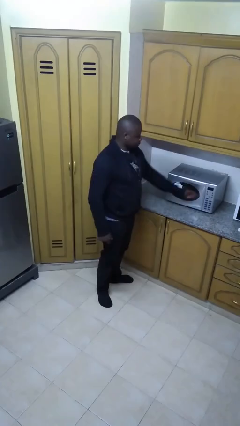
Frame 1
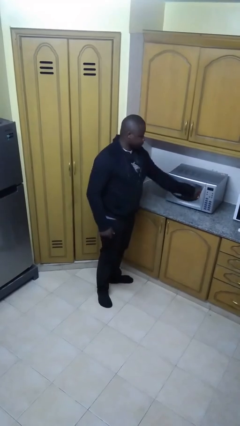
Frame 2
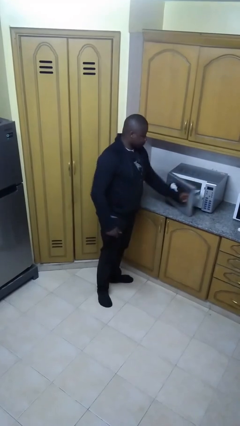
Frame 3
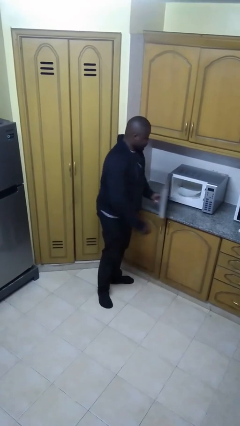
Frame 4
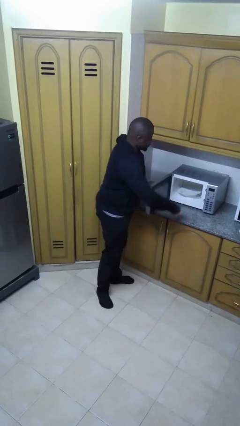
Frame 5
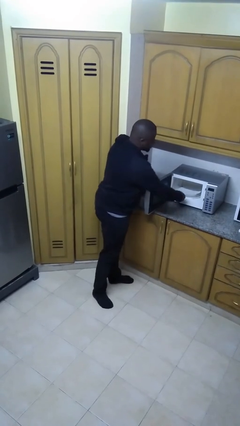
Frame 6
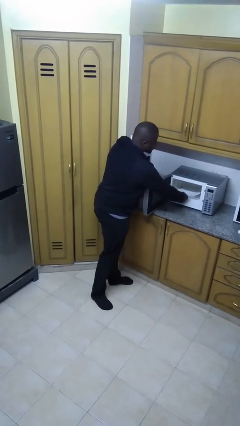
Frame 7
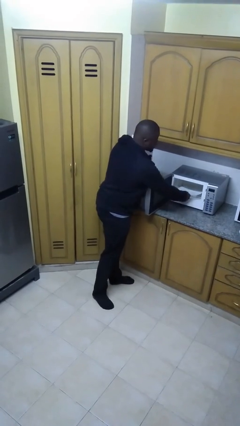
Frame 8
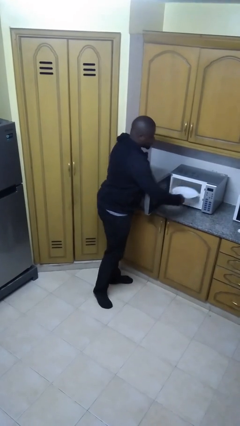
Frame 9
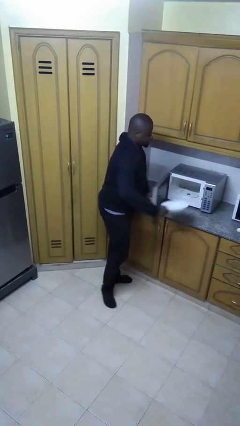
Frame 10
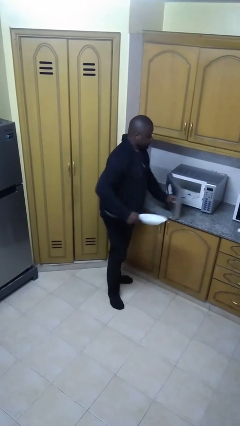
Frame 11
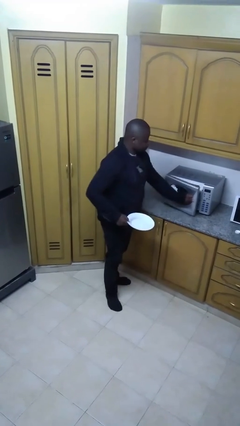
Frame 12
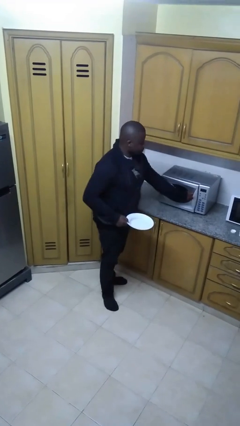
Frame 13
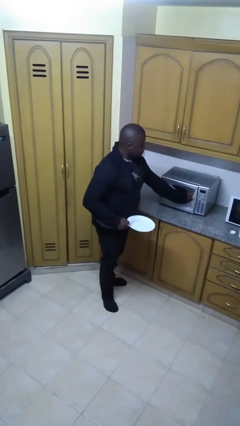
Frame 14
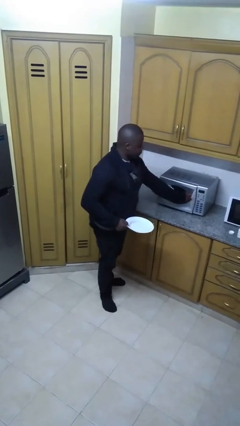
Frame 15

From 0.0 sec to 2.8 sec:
person takes object from microwave

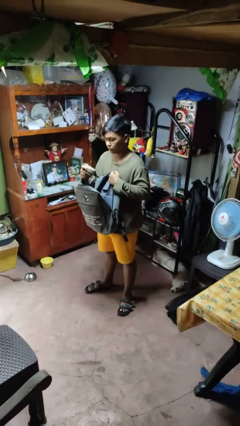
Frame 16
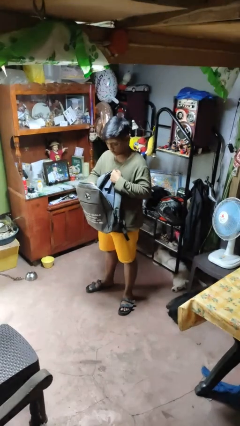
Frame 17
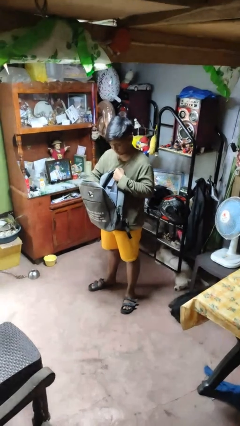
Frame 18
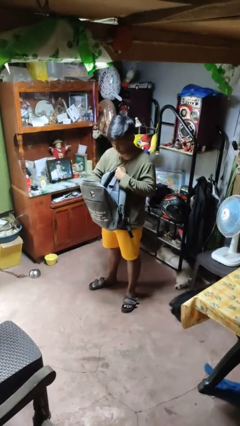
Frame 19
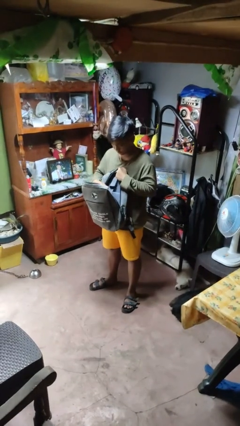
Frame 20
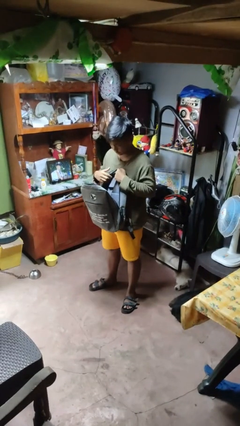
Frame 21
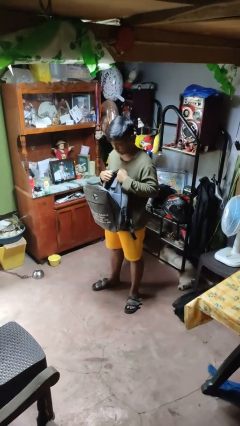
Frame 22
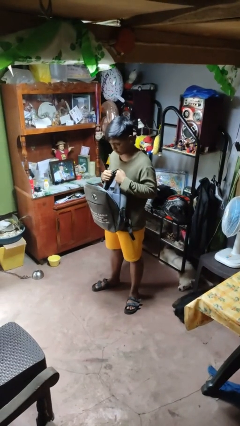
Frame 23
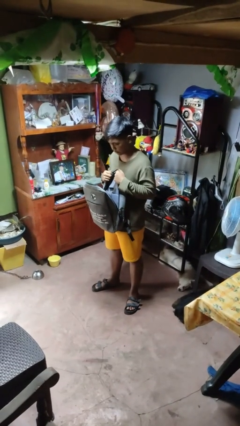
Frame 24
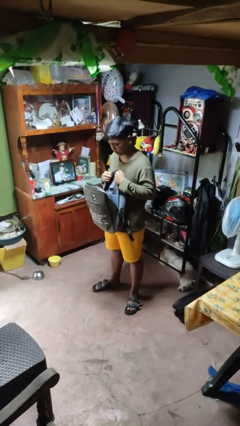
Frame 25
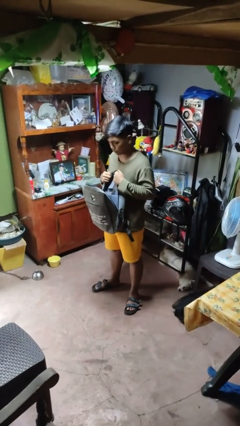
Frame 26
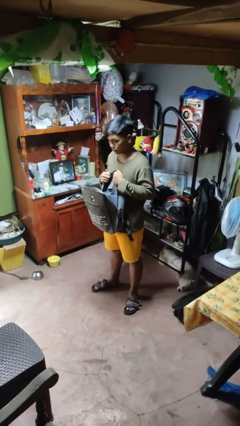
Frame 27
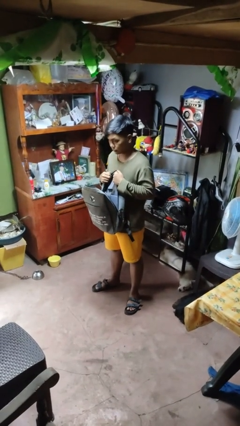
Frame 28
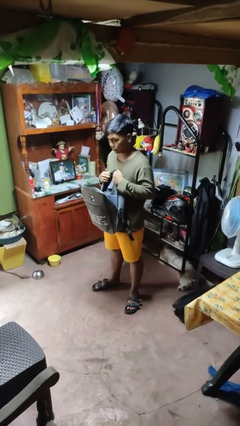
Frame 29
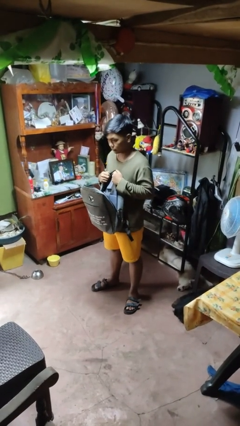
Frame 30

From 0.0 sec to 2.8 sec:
person puts object into backpack

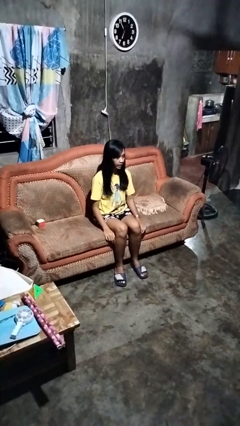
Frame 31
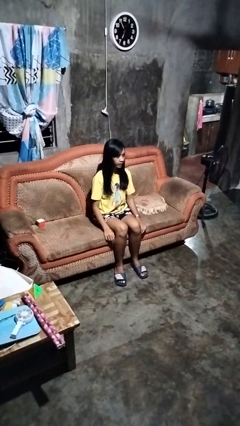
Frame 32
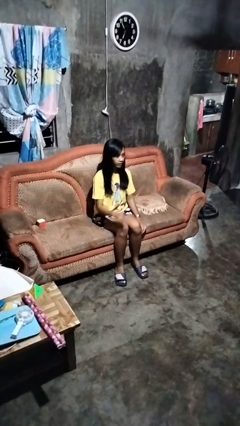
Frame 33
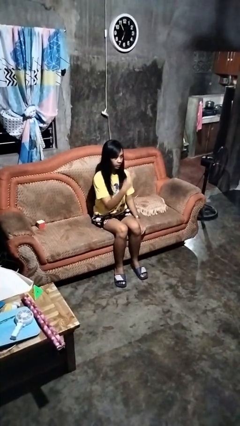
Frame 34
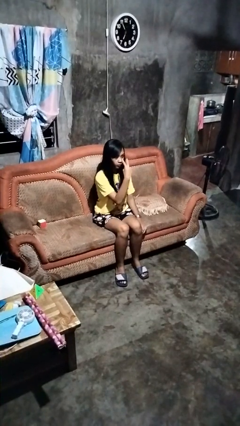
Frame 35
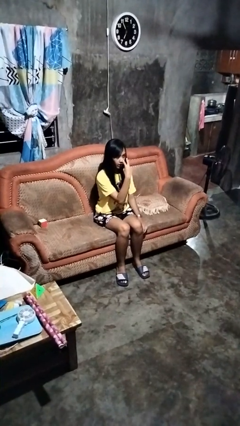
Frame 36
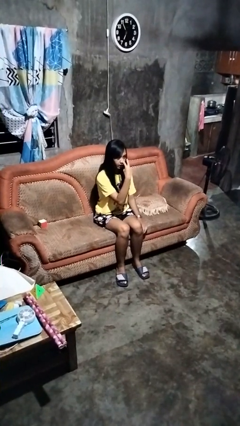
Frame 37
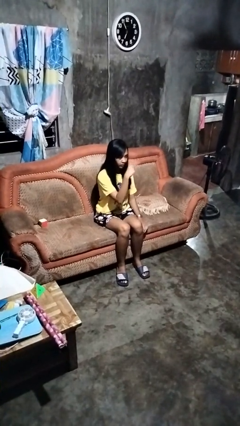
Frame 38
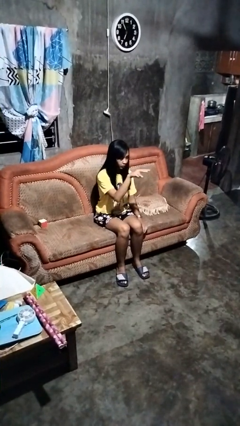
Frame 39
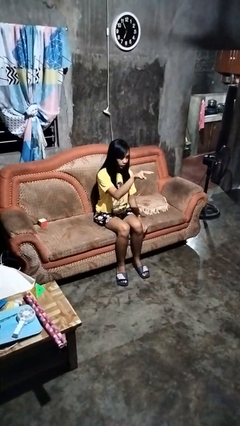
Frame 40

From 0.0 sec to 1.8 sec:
person gestures watch closely

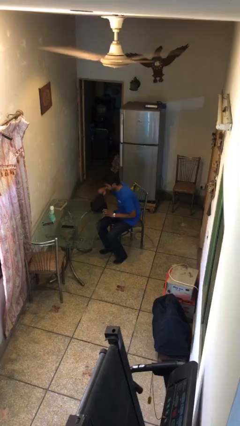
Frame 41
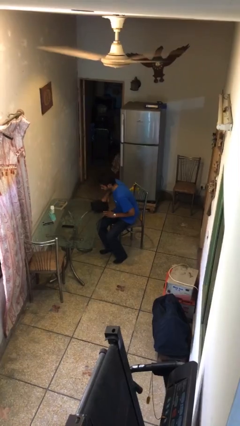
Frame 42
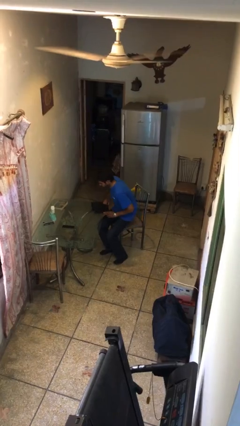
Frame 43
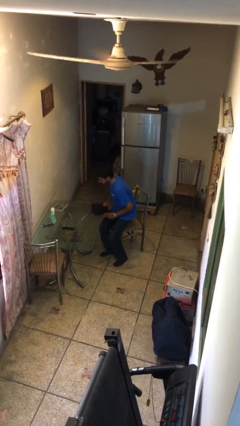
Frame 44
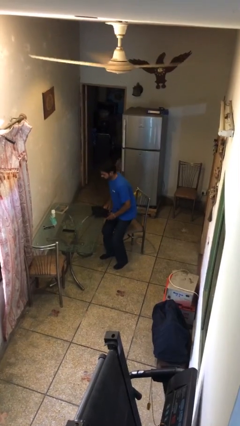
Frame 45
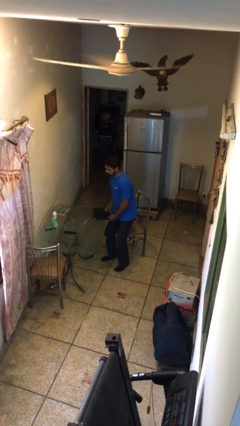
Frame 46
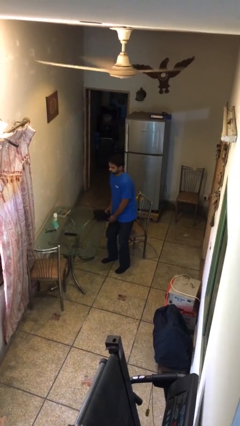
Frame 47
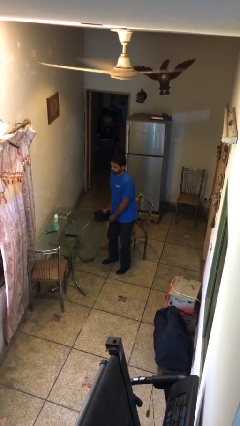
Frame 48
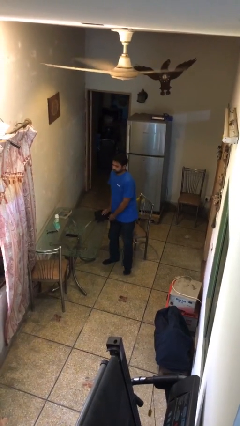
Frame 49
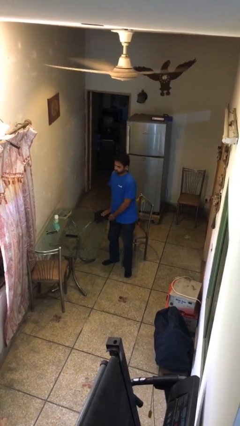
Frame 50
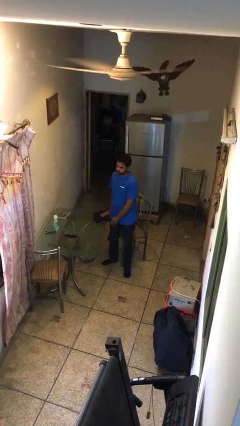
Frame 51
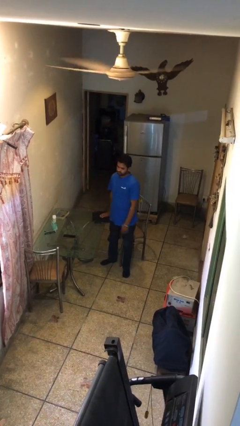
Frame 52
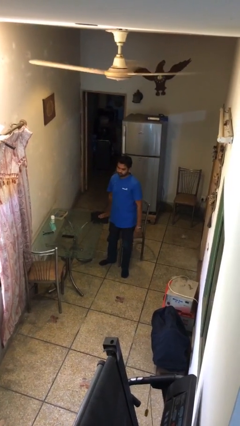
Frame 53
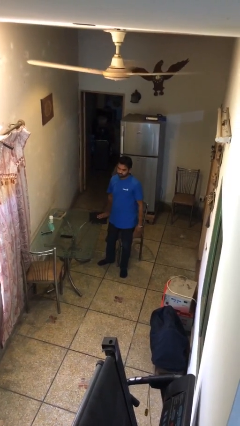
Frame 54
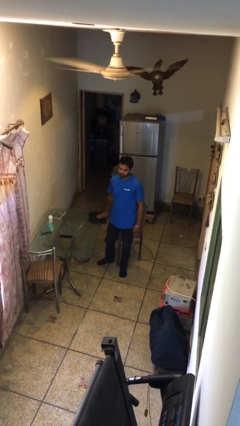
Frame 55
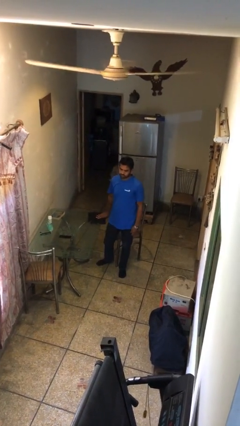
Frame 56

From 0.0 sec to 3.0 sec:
person stands up

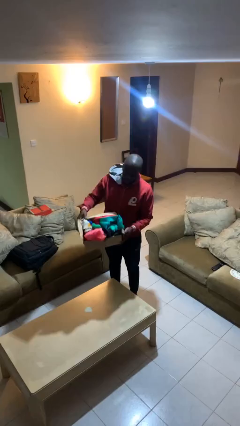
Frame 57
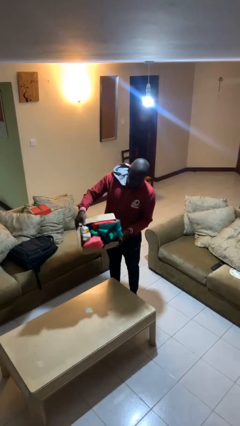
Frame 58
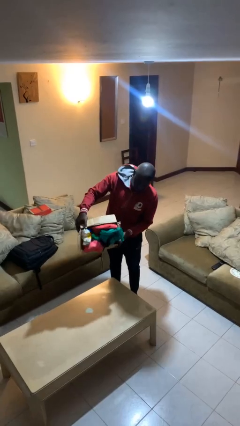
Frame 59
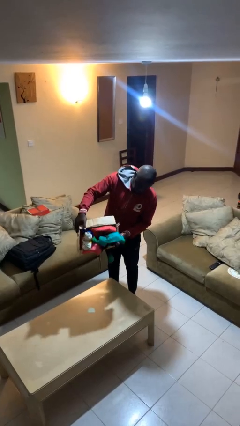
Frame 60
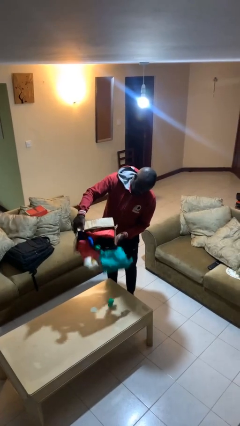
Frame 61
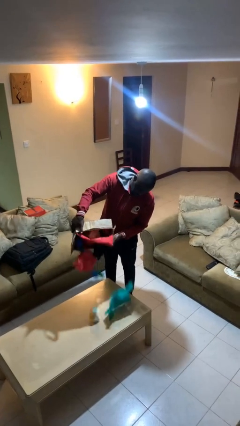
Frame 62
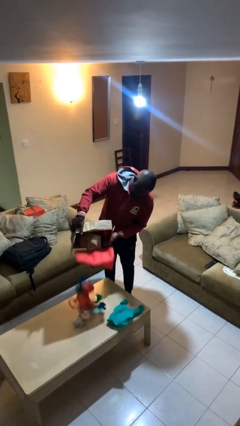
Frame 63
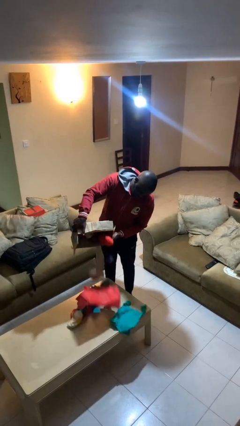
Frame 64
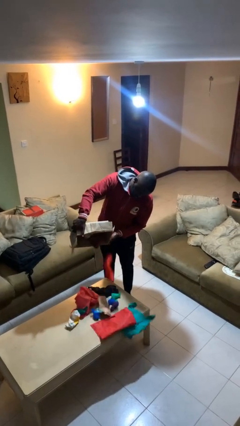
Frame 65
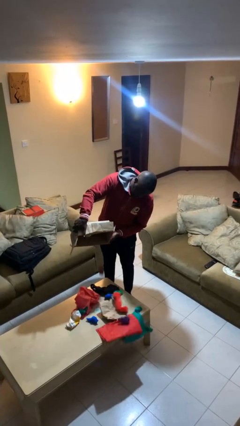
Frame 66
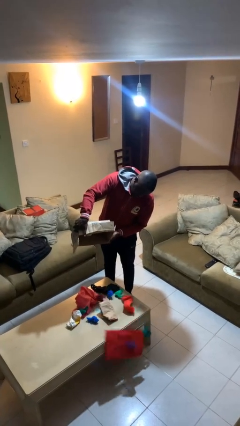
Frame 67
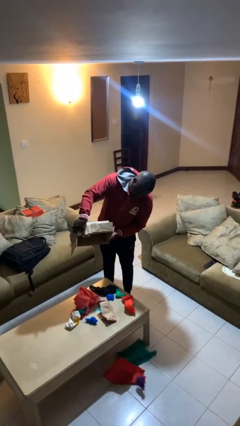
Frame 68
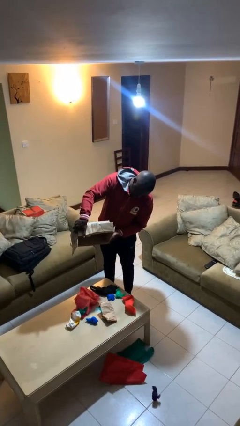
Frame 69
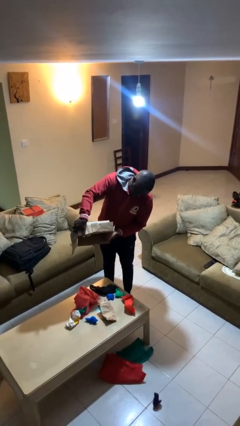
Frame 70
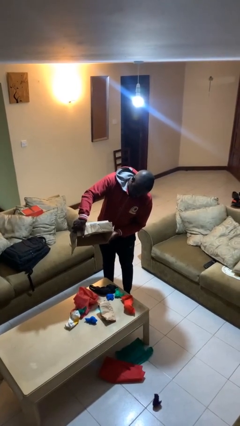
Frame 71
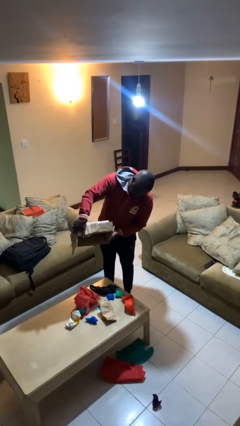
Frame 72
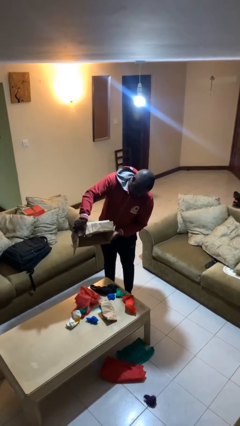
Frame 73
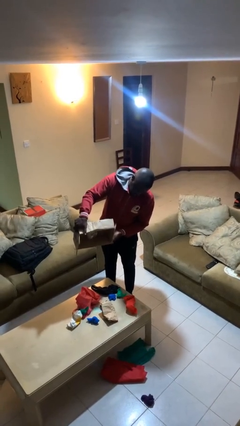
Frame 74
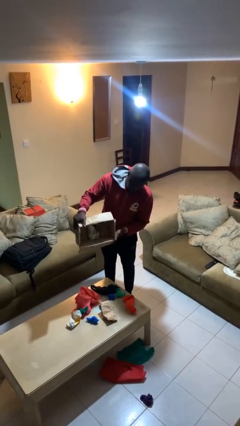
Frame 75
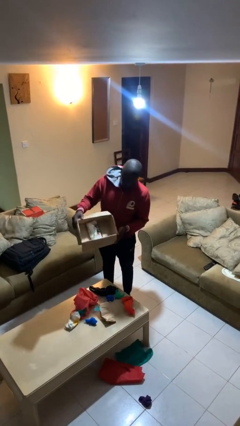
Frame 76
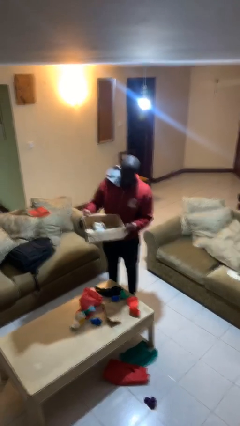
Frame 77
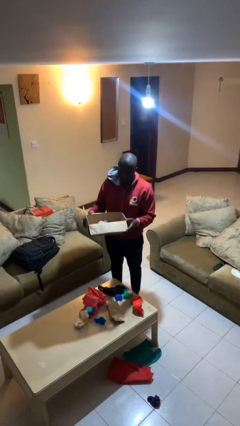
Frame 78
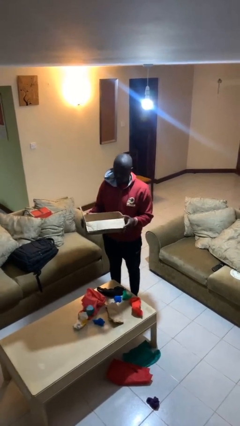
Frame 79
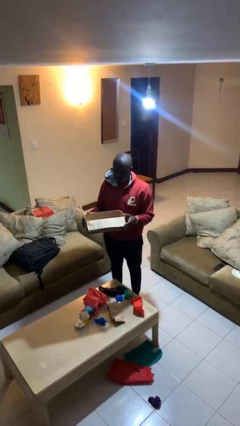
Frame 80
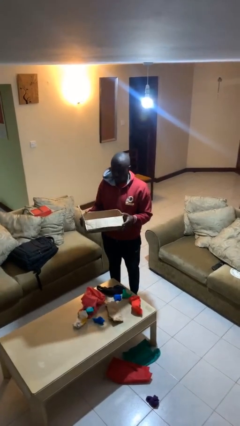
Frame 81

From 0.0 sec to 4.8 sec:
person unloads box onto table

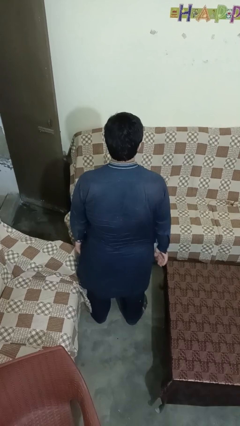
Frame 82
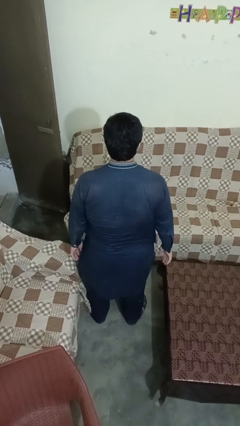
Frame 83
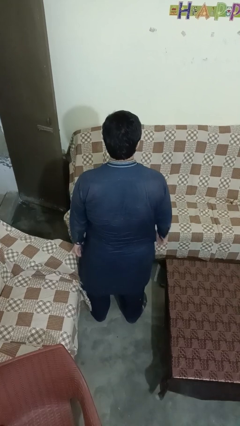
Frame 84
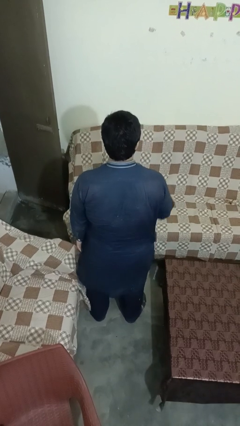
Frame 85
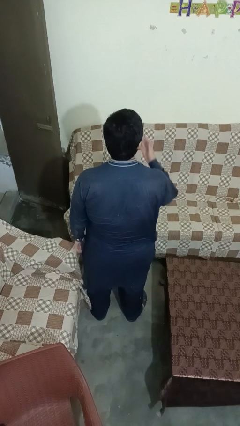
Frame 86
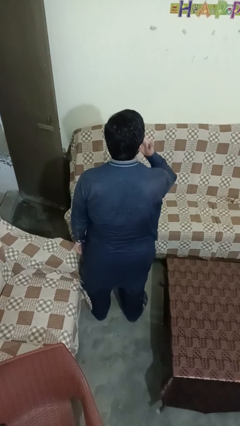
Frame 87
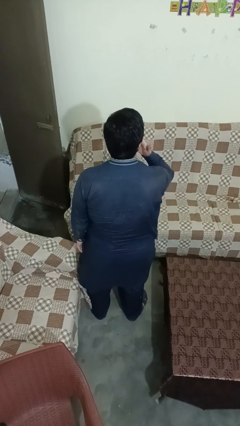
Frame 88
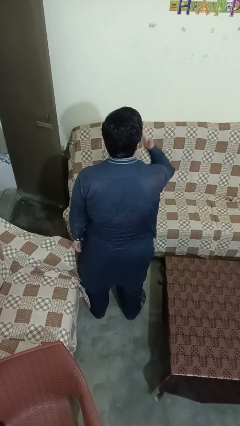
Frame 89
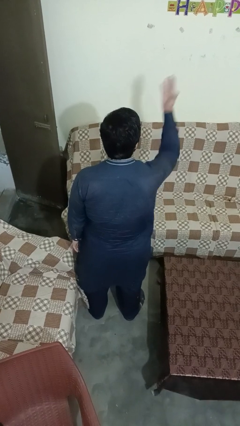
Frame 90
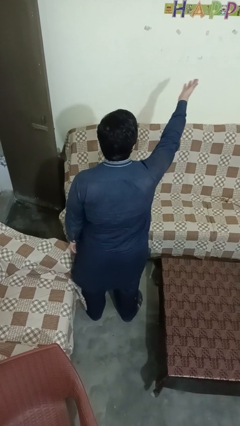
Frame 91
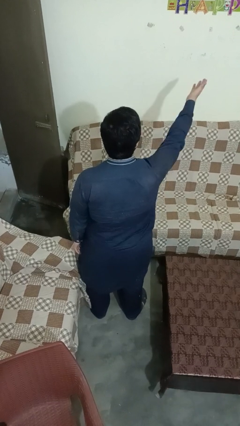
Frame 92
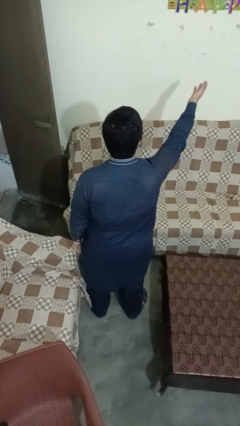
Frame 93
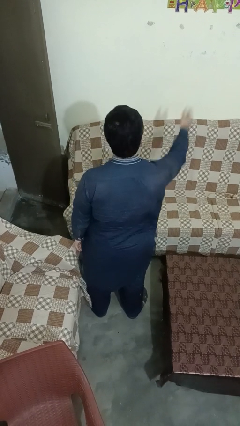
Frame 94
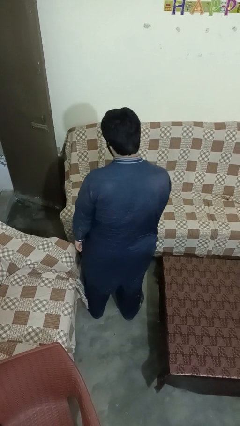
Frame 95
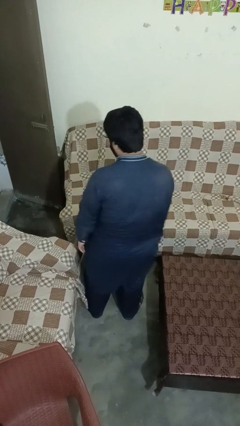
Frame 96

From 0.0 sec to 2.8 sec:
person gestures blow kiss
